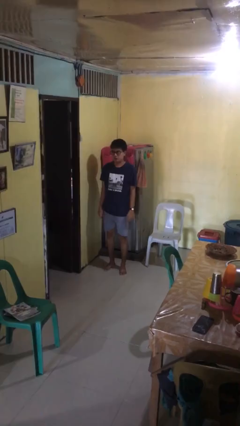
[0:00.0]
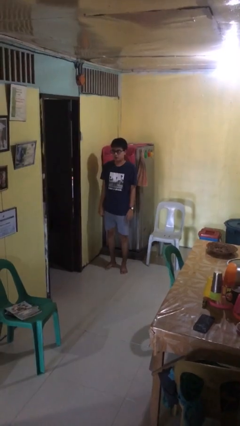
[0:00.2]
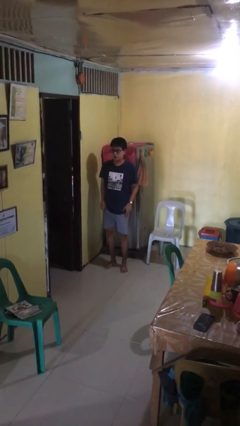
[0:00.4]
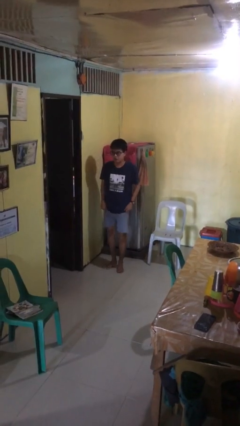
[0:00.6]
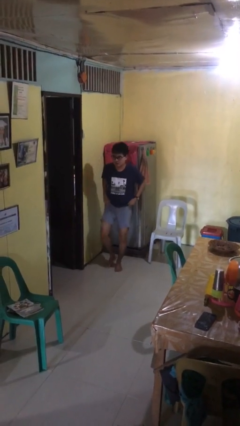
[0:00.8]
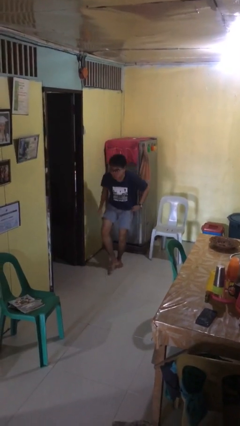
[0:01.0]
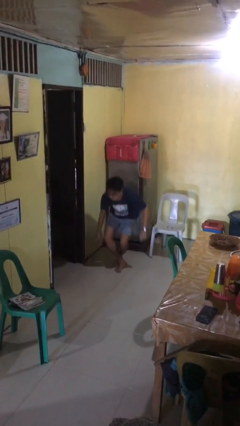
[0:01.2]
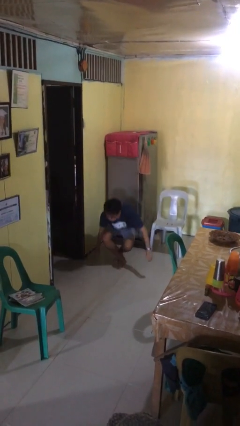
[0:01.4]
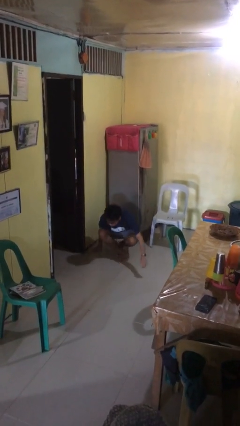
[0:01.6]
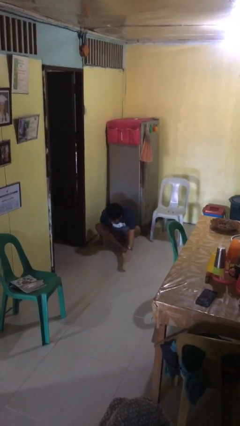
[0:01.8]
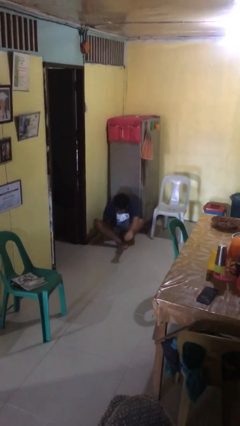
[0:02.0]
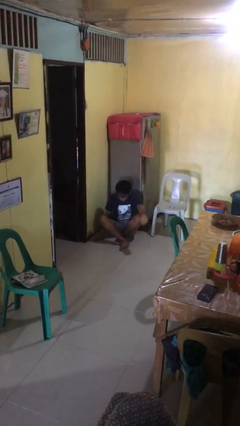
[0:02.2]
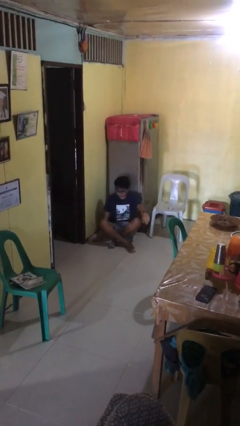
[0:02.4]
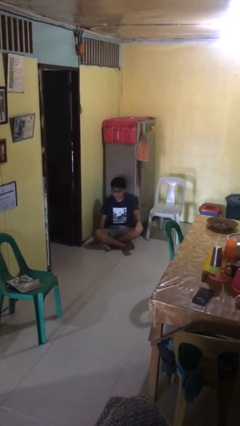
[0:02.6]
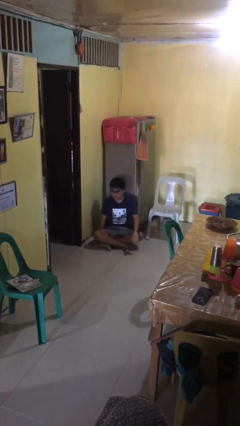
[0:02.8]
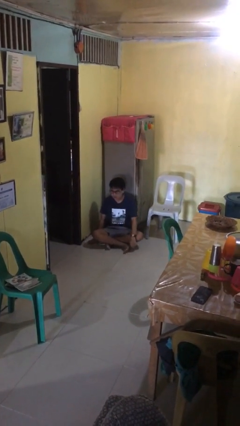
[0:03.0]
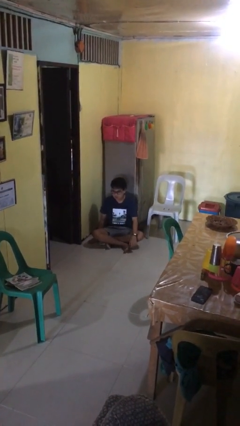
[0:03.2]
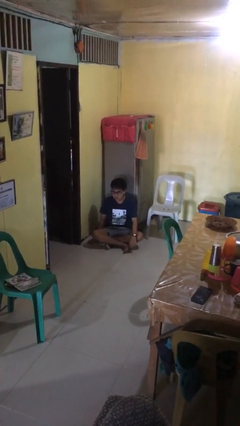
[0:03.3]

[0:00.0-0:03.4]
person sits crisscross

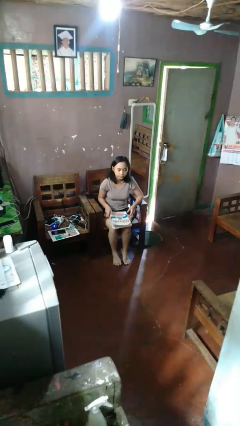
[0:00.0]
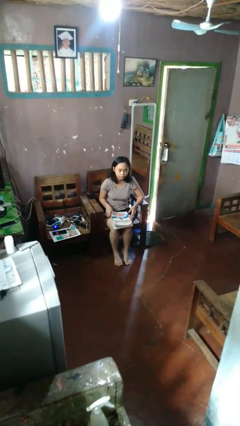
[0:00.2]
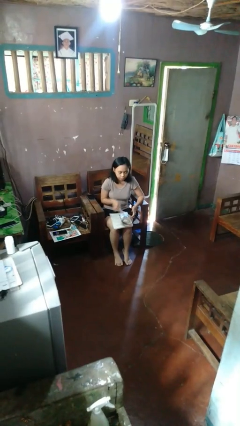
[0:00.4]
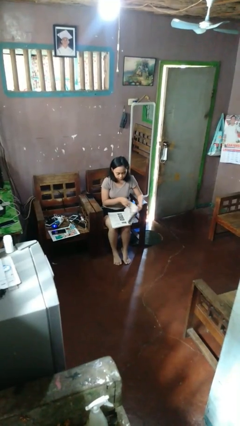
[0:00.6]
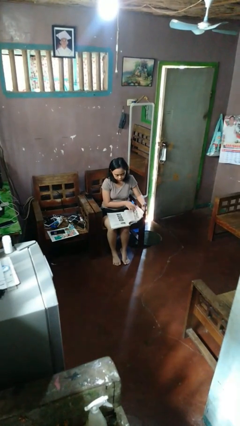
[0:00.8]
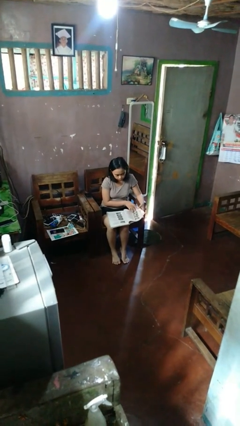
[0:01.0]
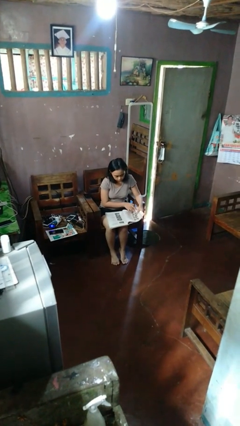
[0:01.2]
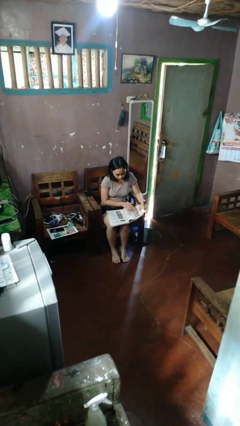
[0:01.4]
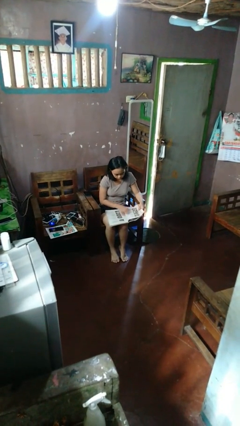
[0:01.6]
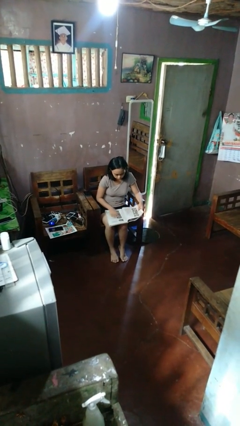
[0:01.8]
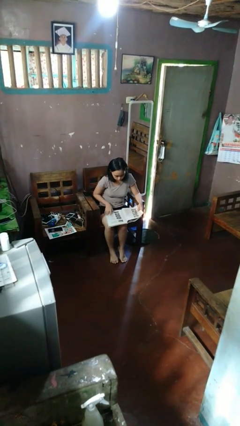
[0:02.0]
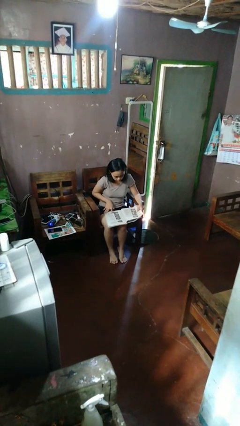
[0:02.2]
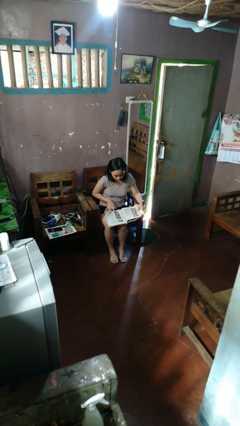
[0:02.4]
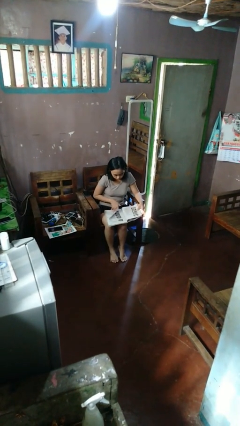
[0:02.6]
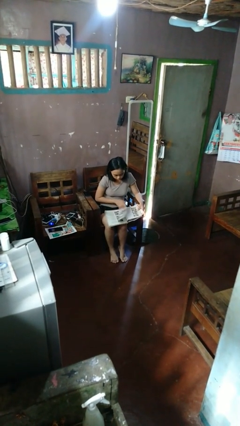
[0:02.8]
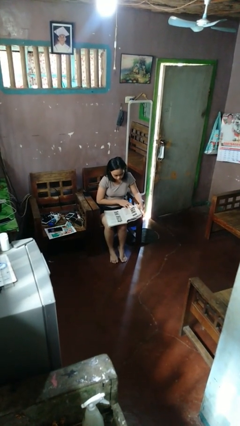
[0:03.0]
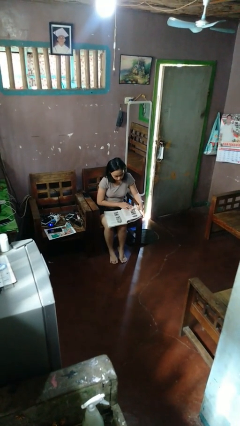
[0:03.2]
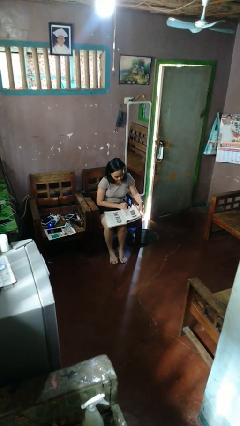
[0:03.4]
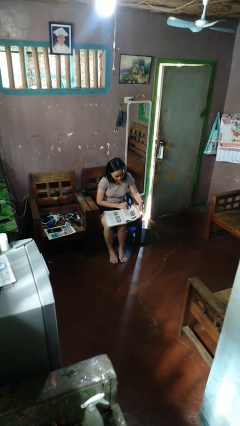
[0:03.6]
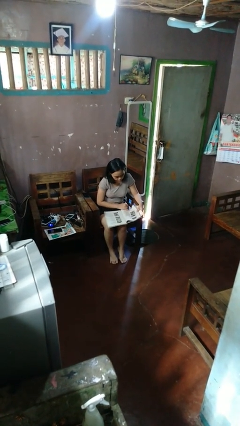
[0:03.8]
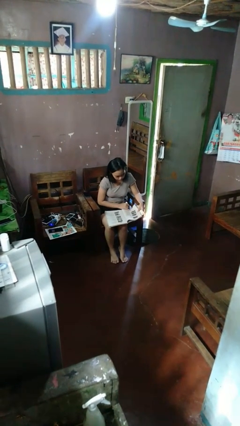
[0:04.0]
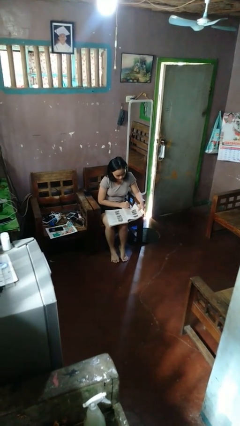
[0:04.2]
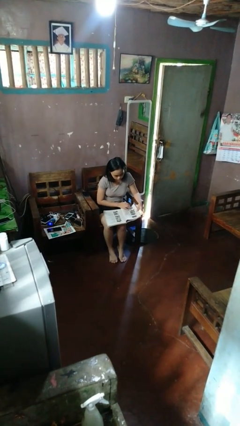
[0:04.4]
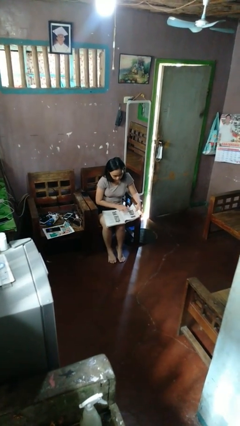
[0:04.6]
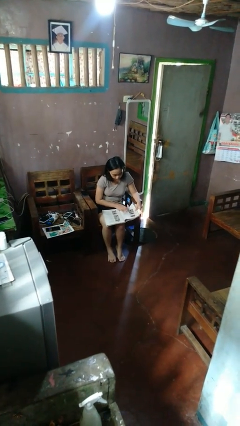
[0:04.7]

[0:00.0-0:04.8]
person reads book

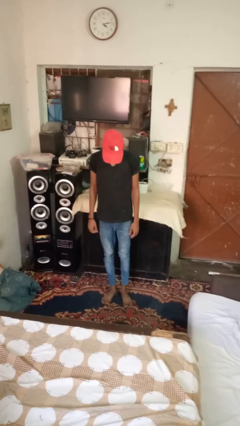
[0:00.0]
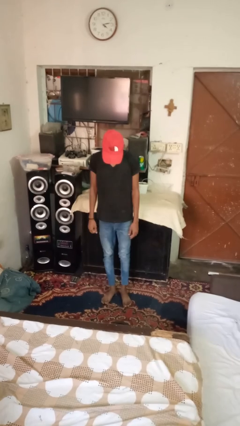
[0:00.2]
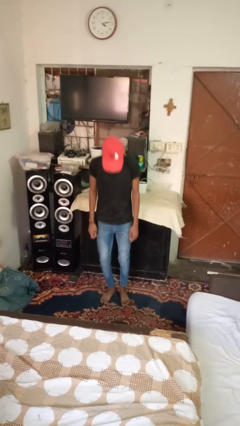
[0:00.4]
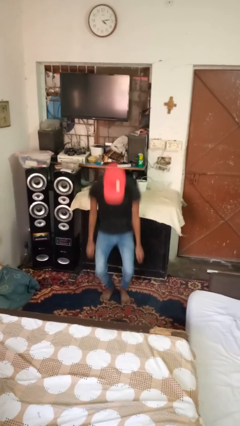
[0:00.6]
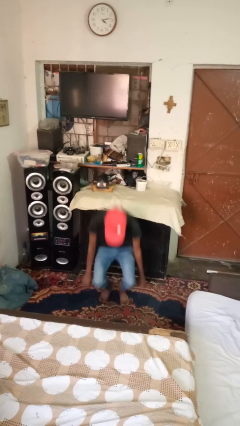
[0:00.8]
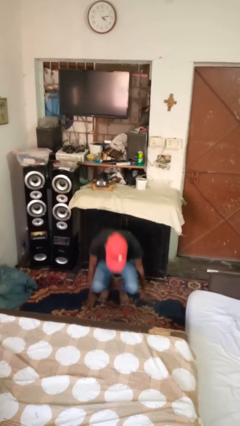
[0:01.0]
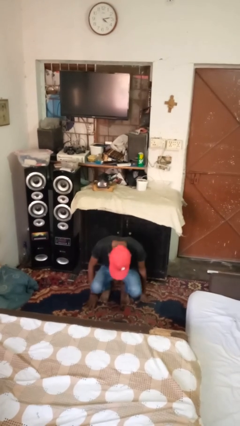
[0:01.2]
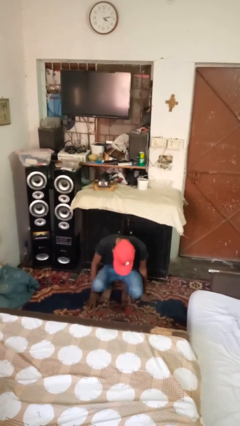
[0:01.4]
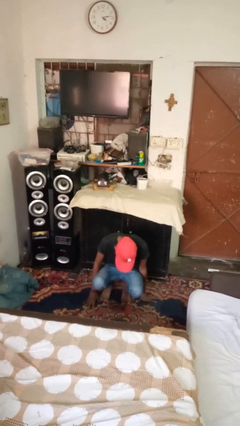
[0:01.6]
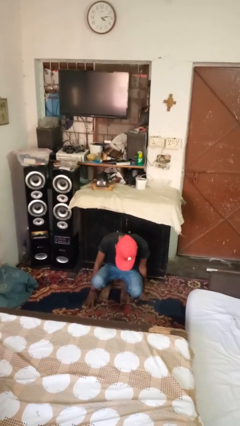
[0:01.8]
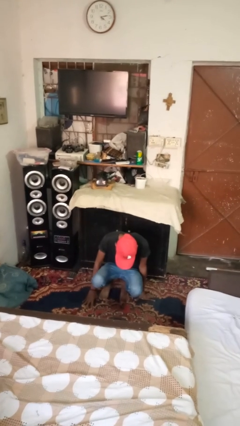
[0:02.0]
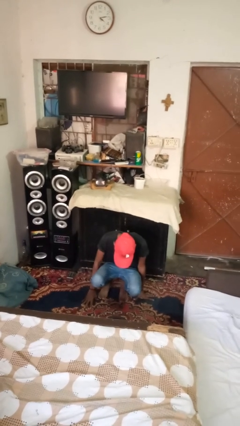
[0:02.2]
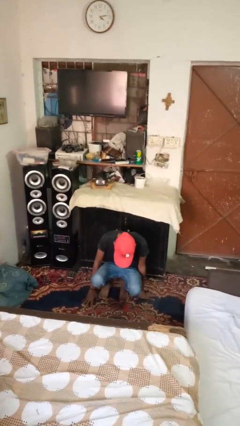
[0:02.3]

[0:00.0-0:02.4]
person falls while standing

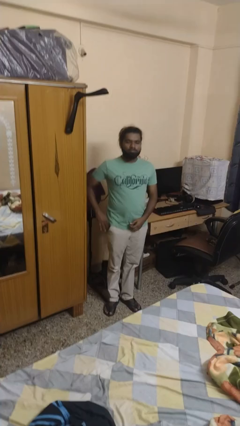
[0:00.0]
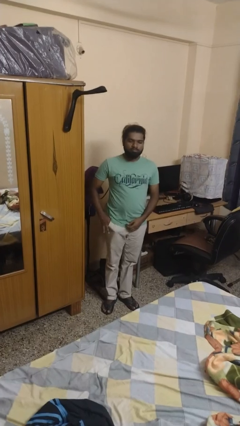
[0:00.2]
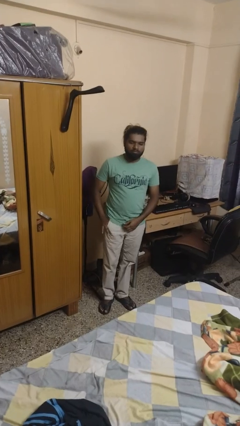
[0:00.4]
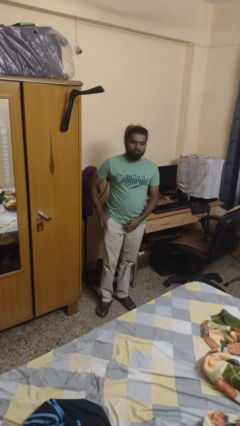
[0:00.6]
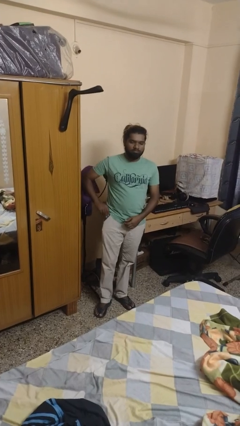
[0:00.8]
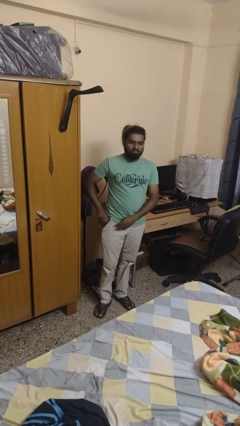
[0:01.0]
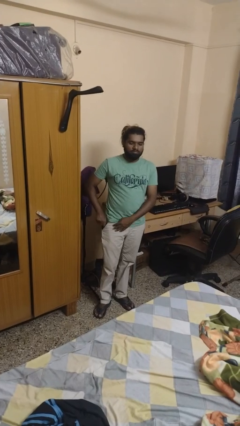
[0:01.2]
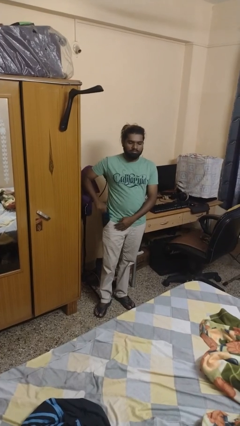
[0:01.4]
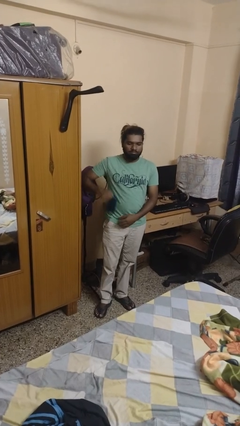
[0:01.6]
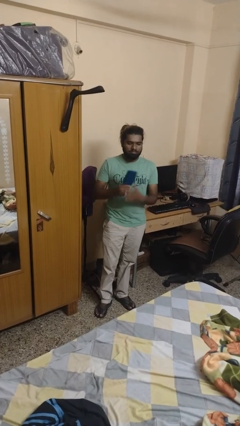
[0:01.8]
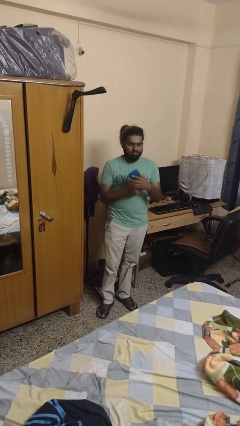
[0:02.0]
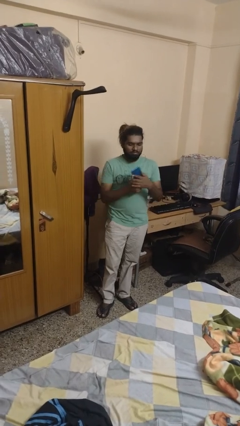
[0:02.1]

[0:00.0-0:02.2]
person takes phone from pocket

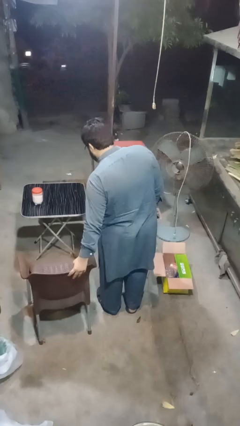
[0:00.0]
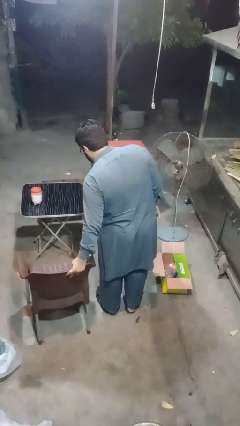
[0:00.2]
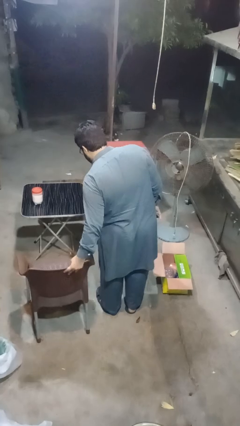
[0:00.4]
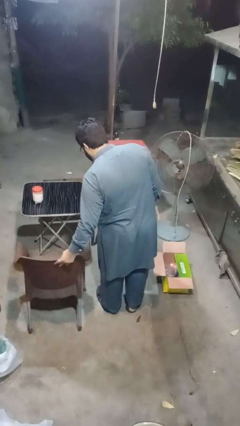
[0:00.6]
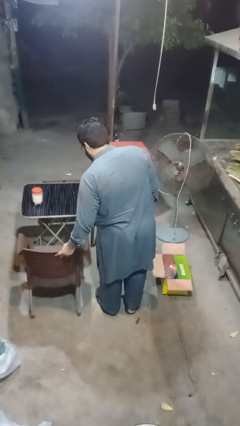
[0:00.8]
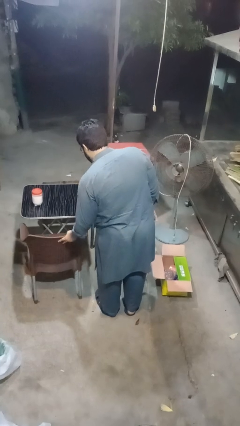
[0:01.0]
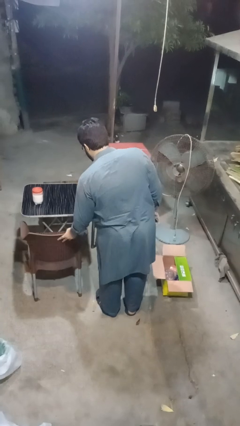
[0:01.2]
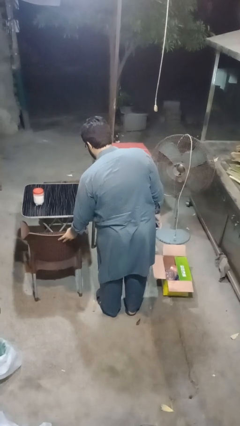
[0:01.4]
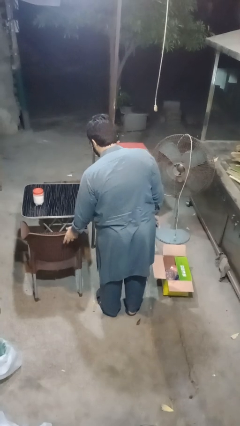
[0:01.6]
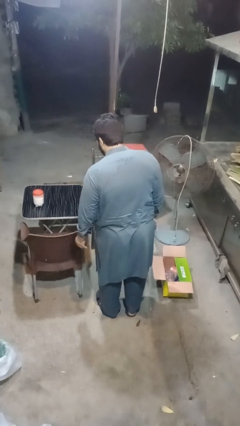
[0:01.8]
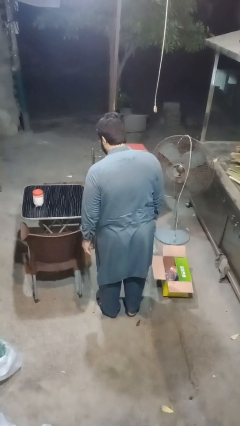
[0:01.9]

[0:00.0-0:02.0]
person pushes in chair

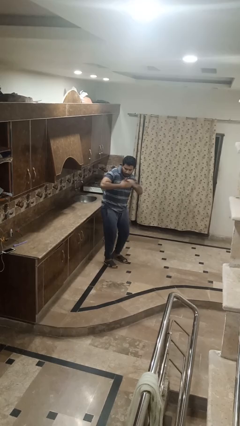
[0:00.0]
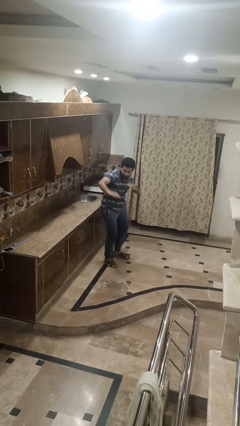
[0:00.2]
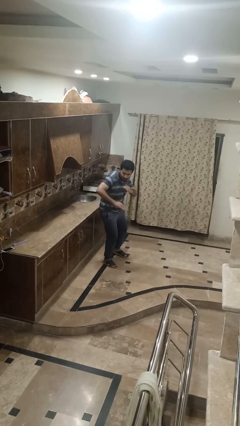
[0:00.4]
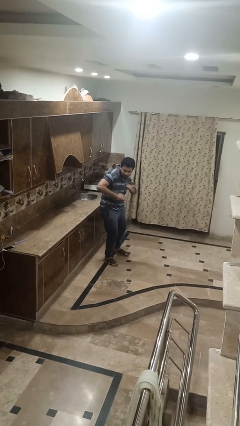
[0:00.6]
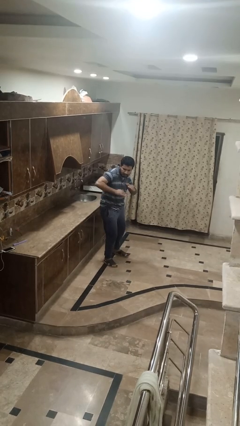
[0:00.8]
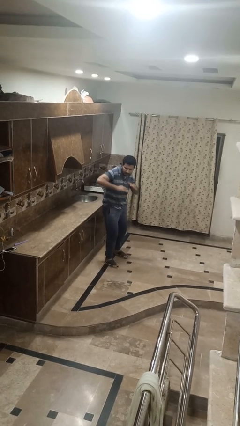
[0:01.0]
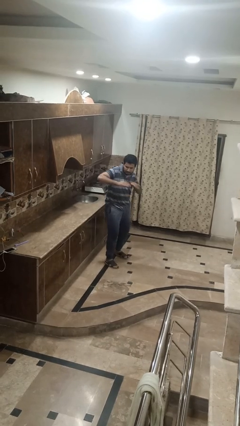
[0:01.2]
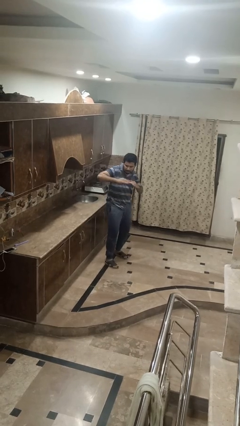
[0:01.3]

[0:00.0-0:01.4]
person karate chop

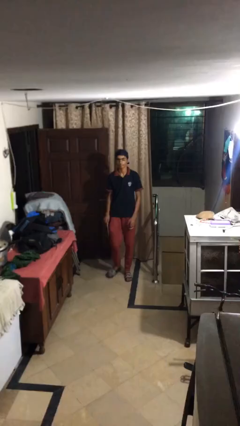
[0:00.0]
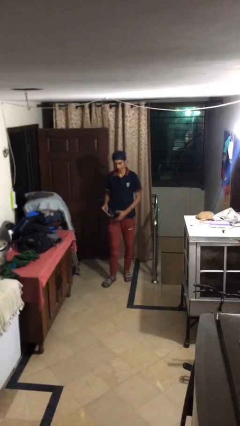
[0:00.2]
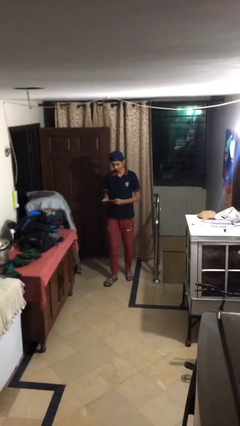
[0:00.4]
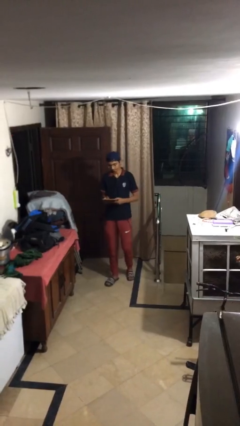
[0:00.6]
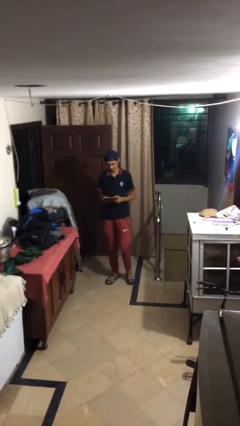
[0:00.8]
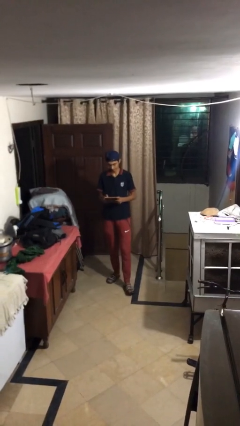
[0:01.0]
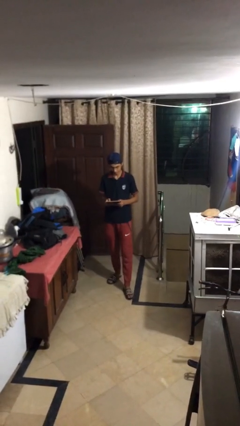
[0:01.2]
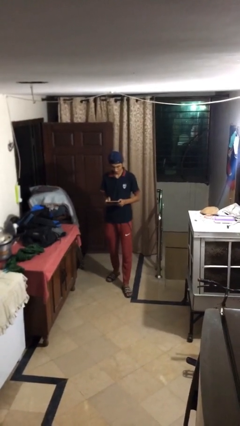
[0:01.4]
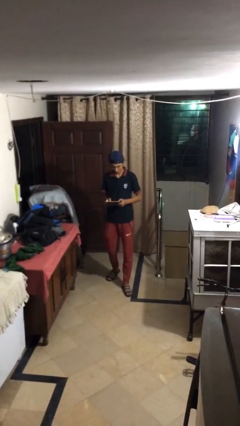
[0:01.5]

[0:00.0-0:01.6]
person texts on phone
